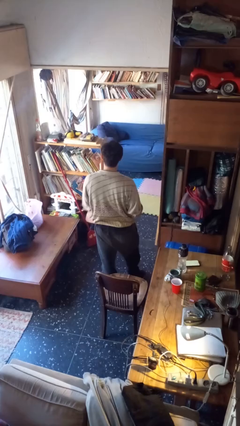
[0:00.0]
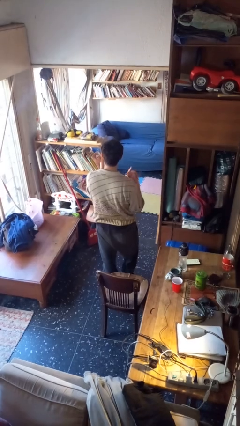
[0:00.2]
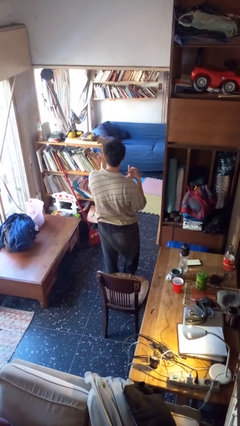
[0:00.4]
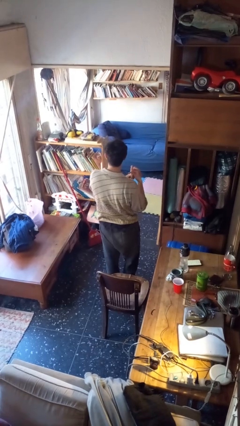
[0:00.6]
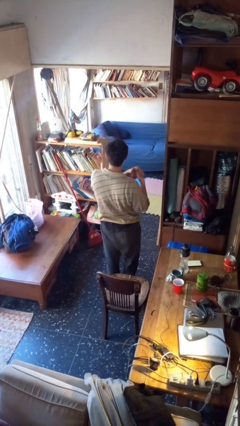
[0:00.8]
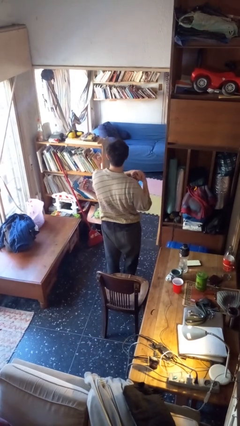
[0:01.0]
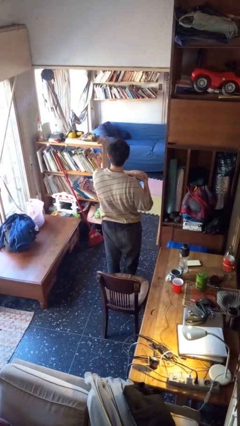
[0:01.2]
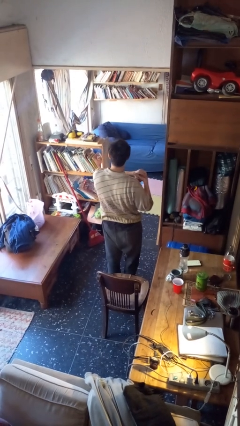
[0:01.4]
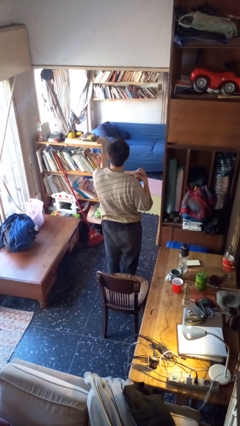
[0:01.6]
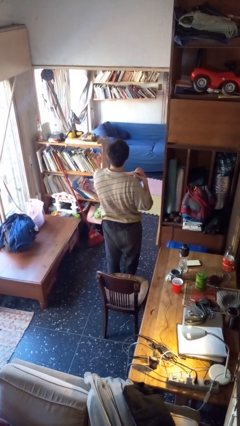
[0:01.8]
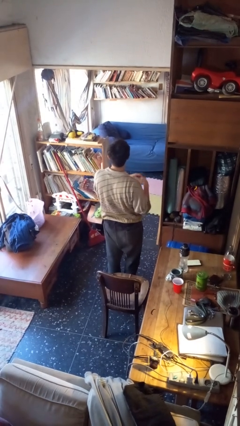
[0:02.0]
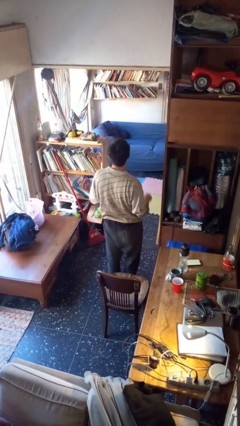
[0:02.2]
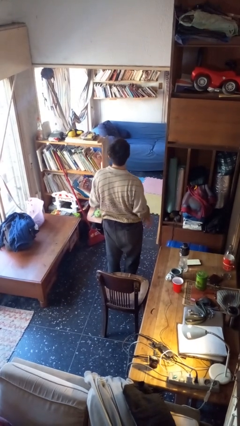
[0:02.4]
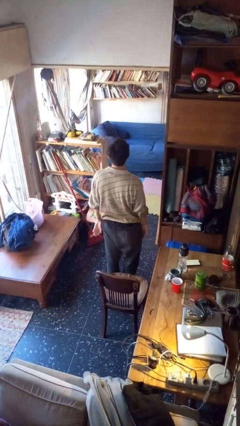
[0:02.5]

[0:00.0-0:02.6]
person snaps fingers

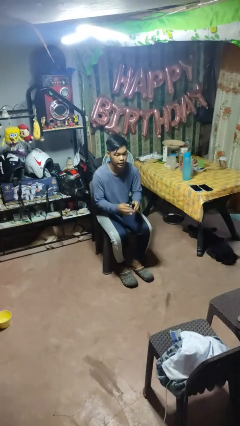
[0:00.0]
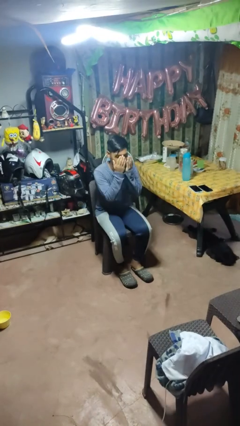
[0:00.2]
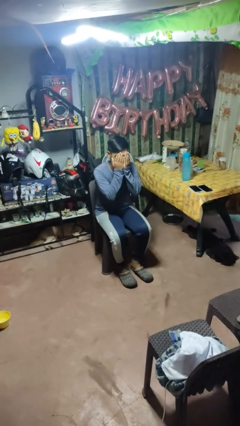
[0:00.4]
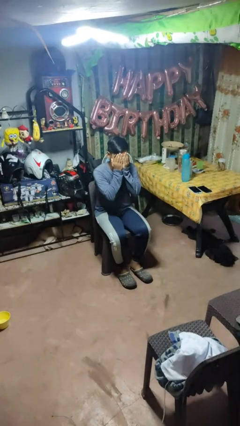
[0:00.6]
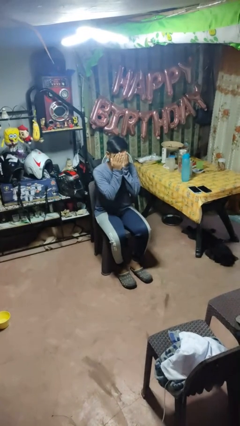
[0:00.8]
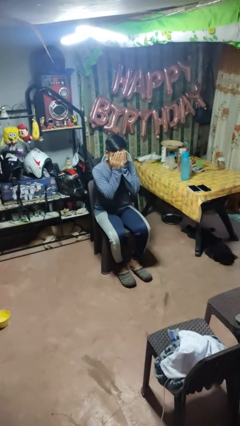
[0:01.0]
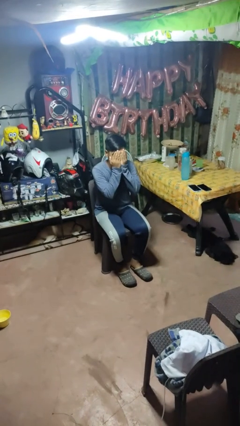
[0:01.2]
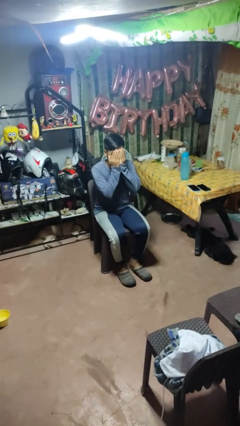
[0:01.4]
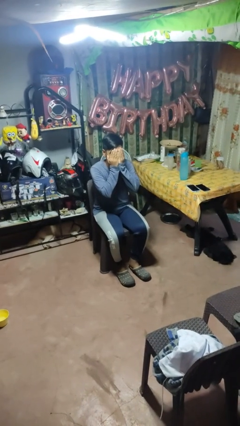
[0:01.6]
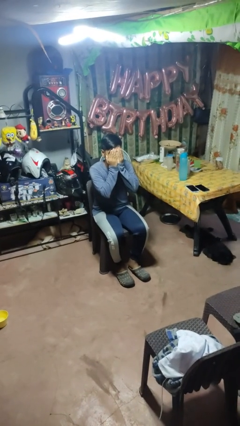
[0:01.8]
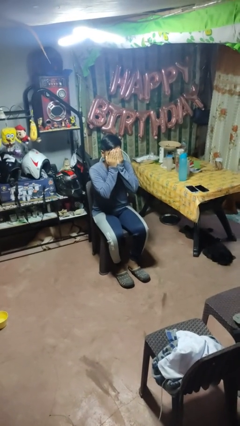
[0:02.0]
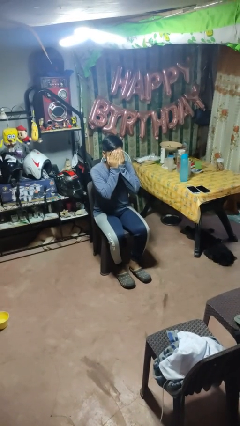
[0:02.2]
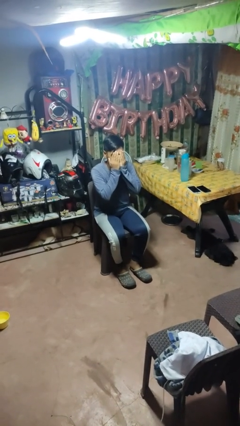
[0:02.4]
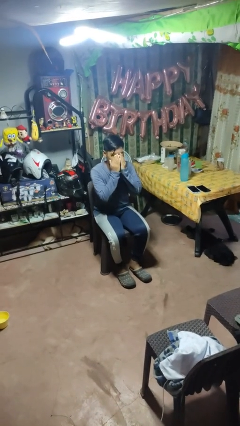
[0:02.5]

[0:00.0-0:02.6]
person covers face with hands

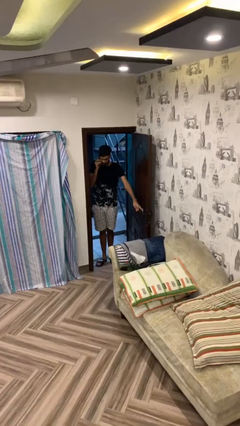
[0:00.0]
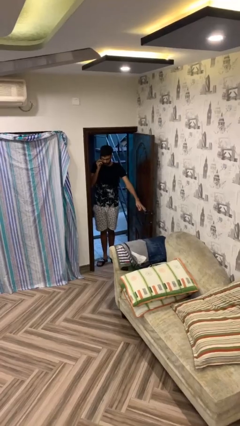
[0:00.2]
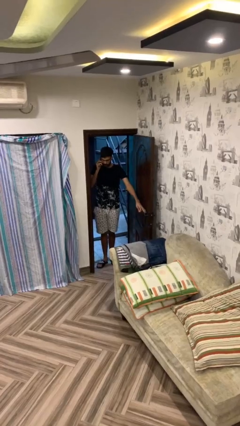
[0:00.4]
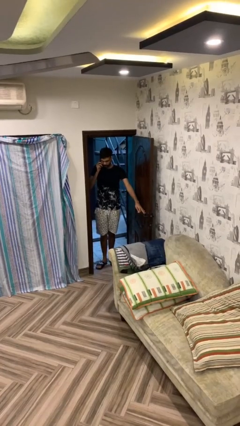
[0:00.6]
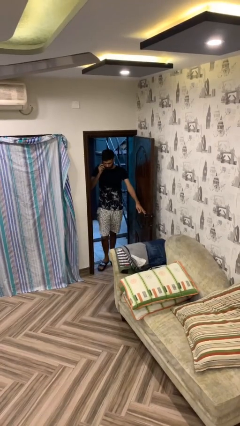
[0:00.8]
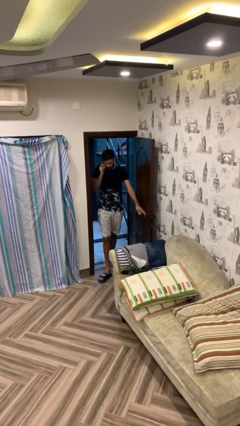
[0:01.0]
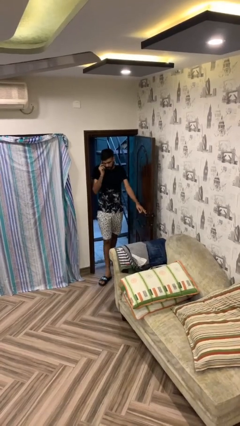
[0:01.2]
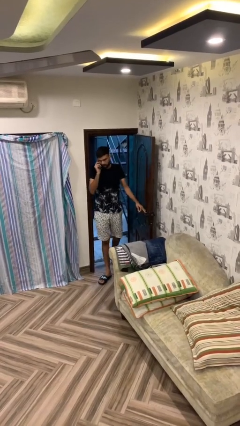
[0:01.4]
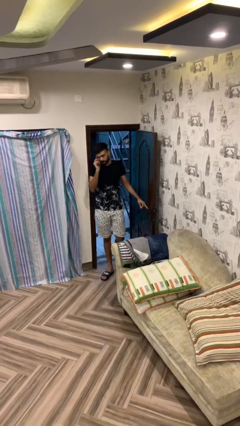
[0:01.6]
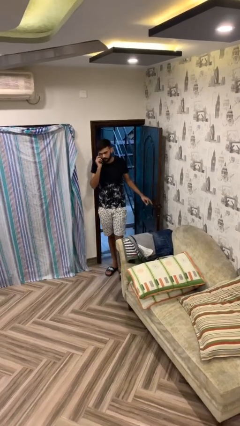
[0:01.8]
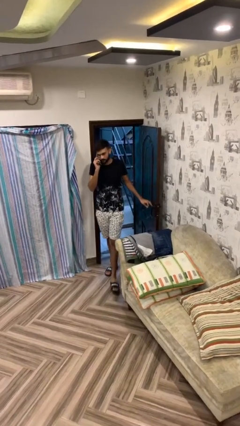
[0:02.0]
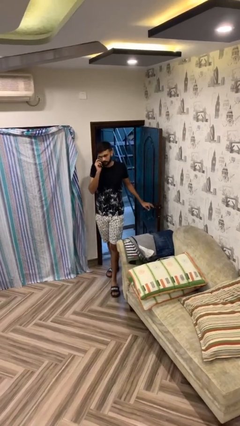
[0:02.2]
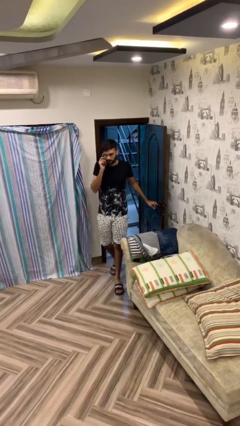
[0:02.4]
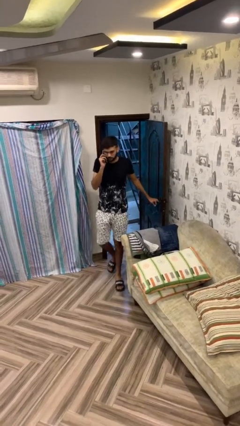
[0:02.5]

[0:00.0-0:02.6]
person enters scene through structure

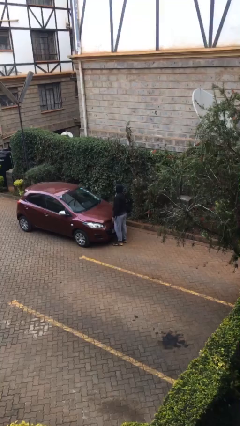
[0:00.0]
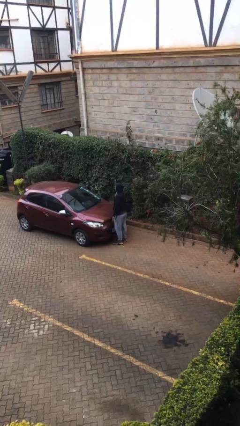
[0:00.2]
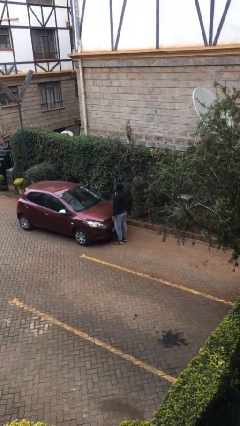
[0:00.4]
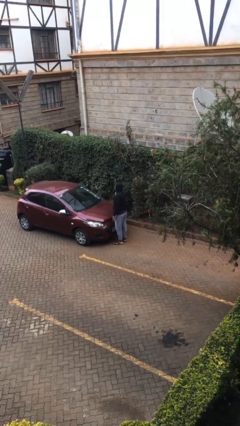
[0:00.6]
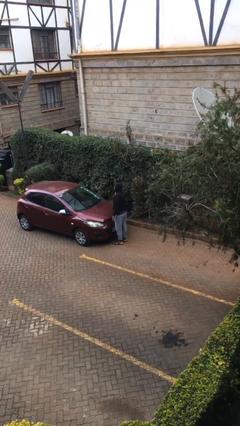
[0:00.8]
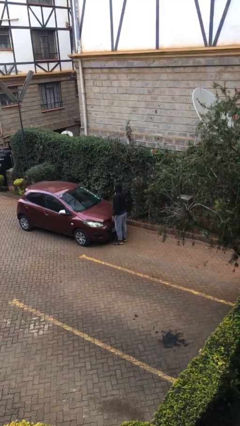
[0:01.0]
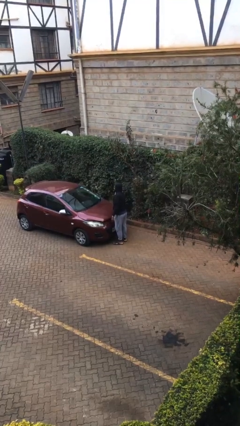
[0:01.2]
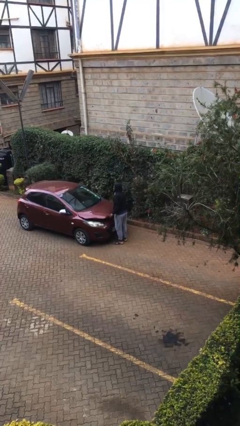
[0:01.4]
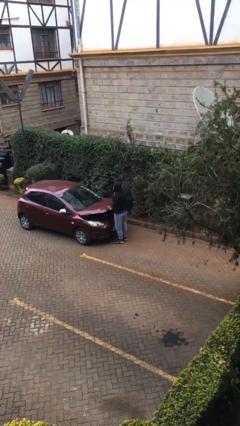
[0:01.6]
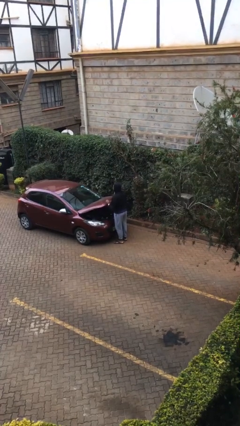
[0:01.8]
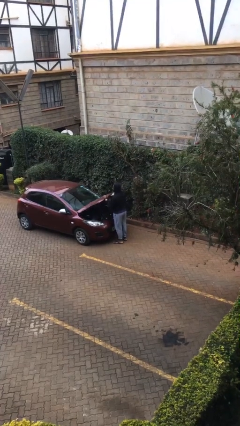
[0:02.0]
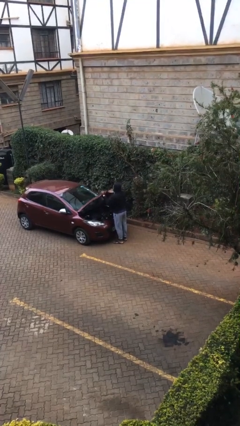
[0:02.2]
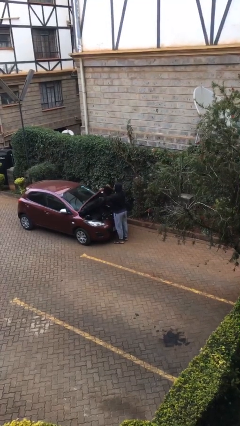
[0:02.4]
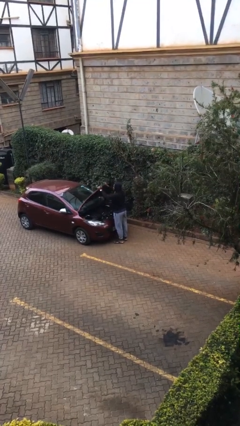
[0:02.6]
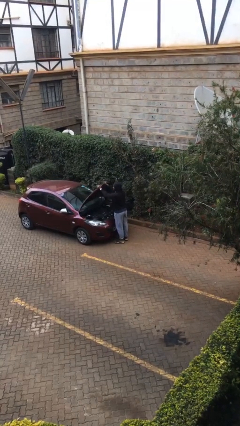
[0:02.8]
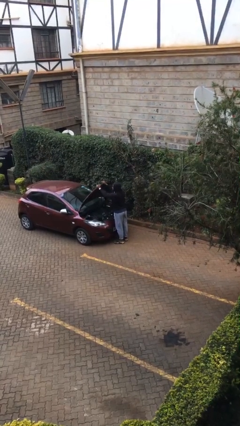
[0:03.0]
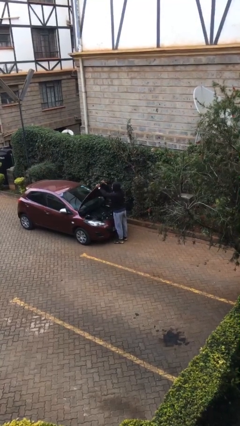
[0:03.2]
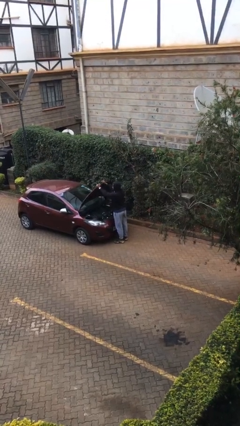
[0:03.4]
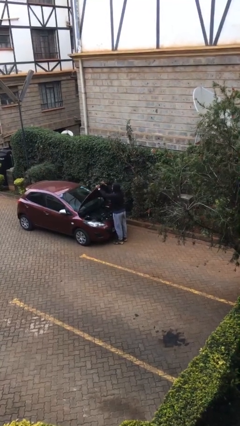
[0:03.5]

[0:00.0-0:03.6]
person opens car hood

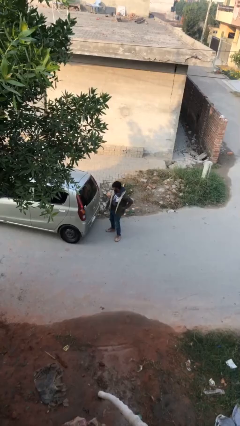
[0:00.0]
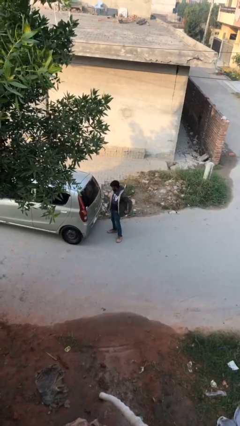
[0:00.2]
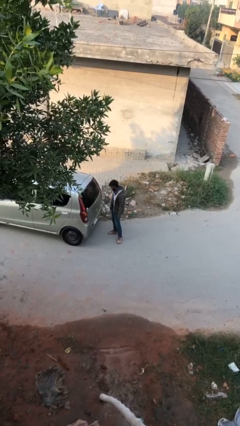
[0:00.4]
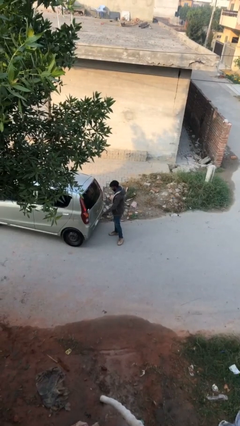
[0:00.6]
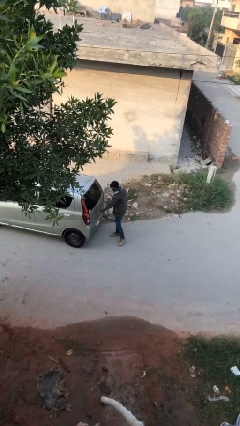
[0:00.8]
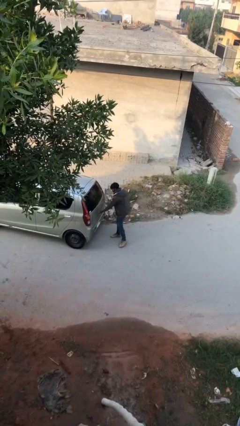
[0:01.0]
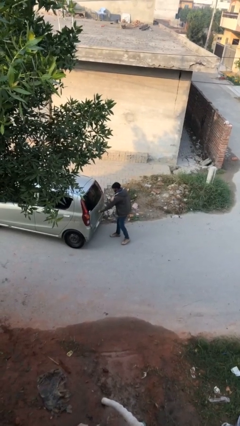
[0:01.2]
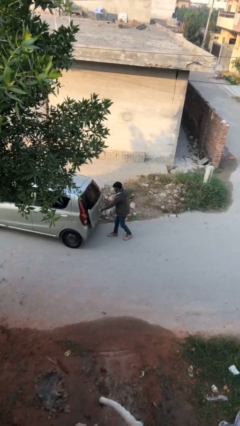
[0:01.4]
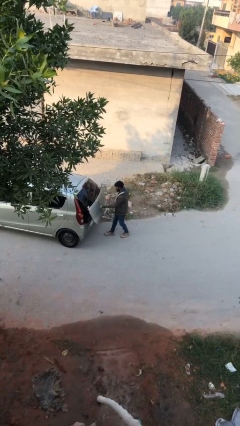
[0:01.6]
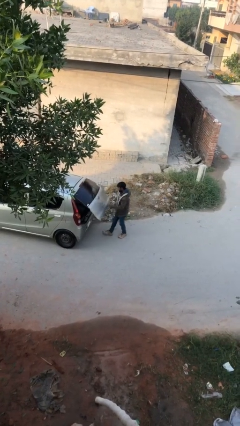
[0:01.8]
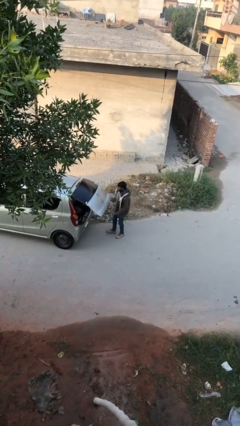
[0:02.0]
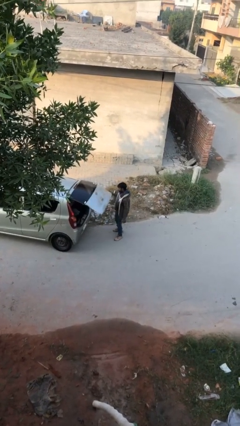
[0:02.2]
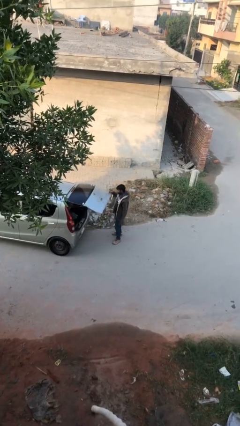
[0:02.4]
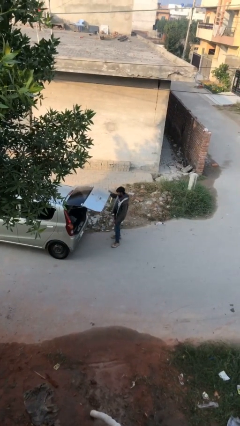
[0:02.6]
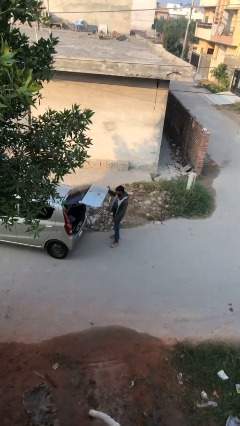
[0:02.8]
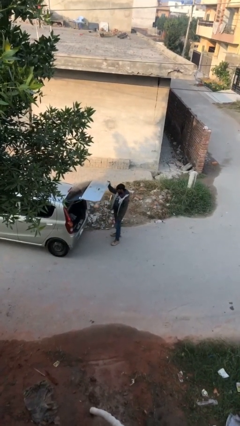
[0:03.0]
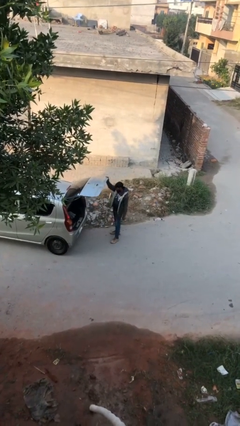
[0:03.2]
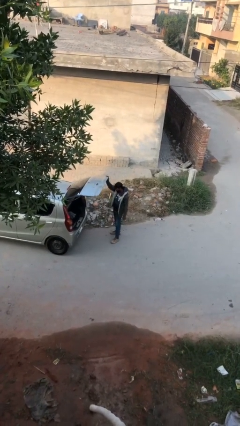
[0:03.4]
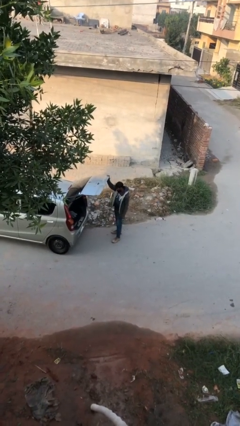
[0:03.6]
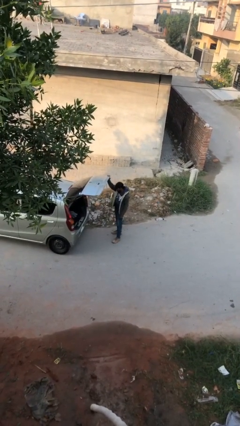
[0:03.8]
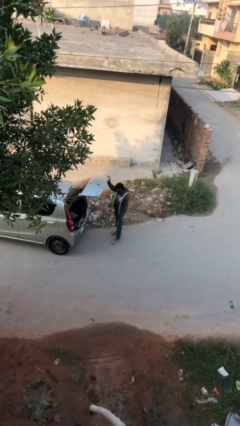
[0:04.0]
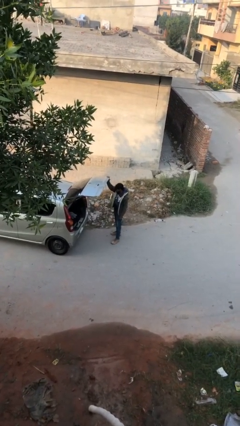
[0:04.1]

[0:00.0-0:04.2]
person opens car trunk

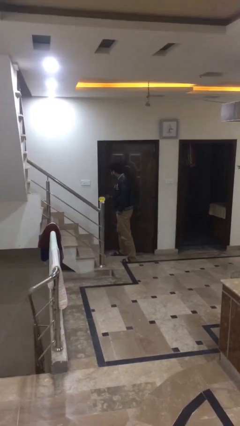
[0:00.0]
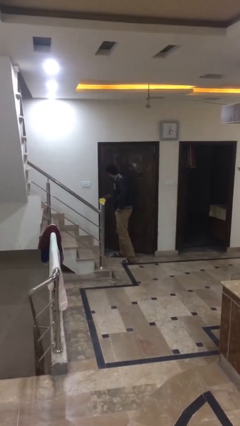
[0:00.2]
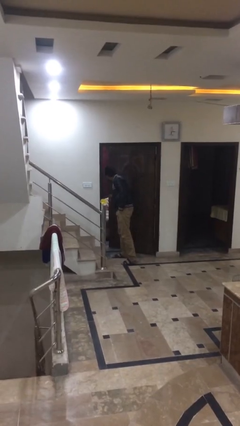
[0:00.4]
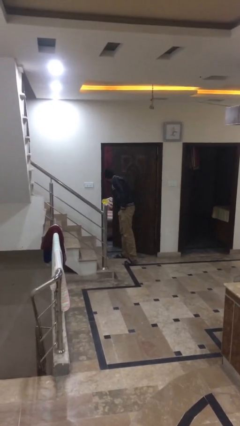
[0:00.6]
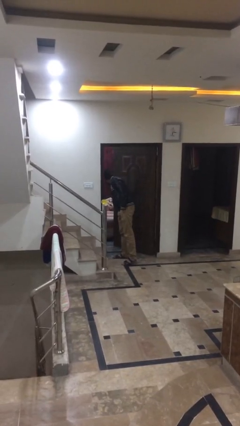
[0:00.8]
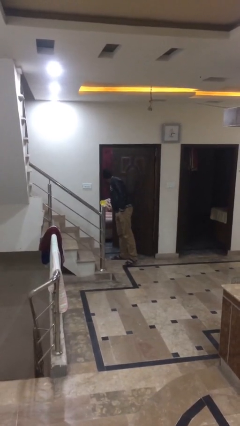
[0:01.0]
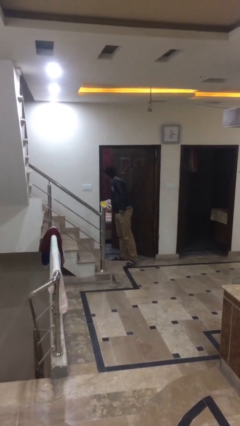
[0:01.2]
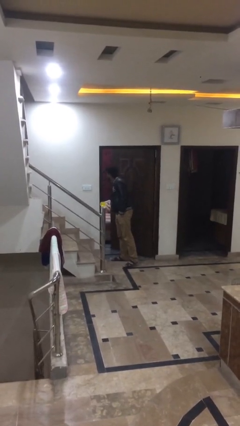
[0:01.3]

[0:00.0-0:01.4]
person opens facility door

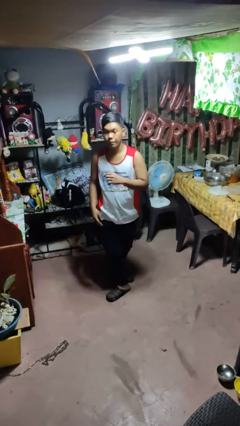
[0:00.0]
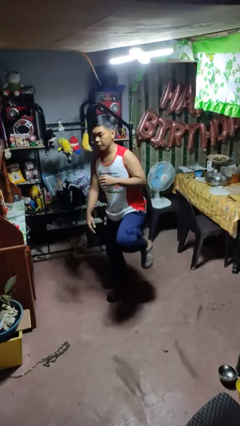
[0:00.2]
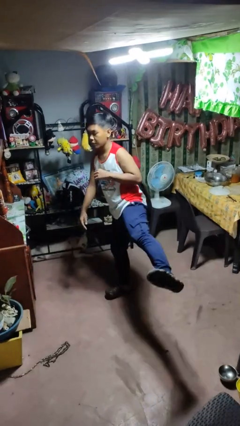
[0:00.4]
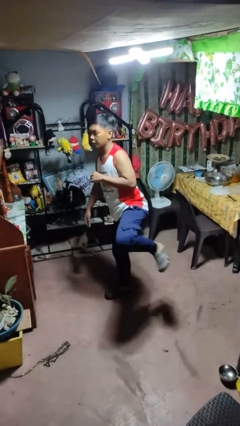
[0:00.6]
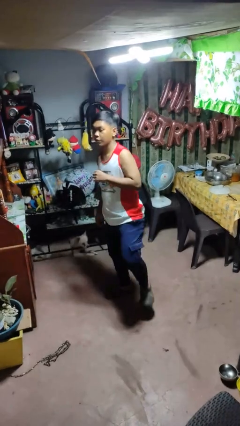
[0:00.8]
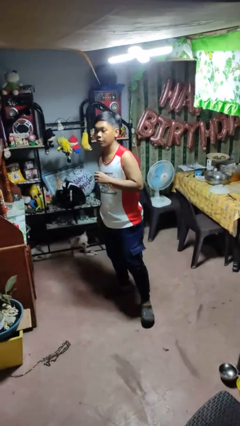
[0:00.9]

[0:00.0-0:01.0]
person karate kicks
